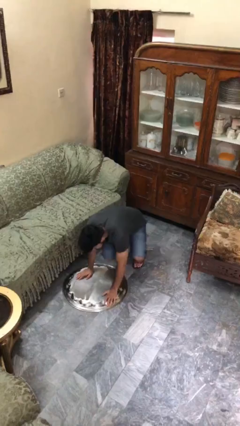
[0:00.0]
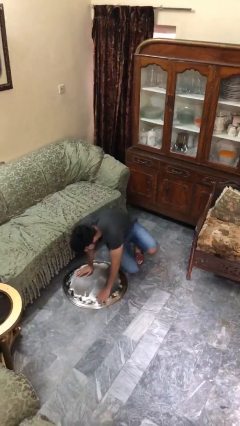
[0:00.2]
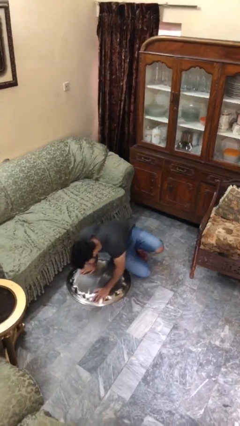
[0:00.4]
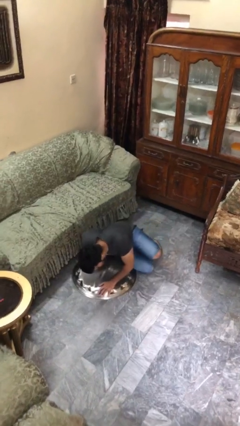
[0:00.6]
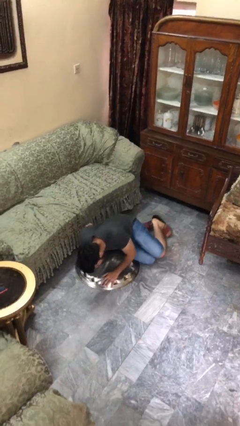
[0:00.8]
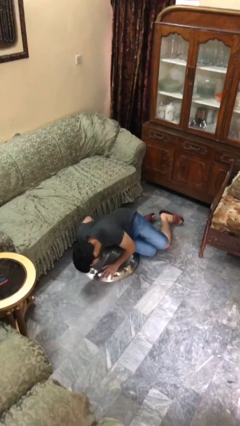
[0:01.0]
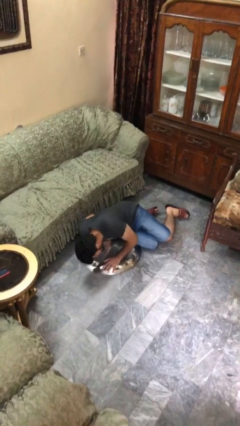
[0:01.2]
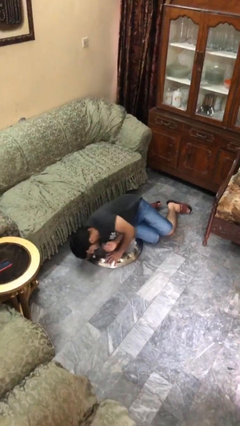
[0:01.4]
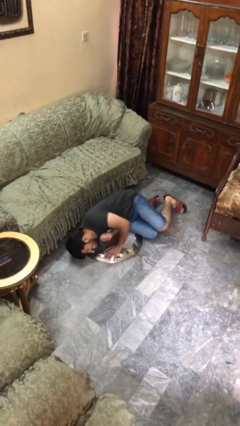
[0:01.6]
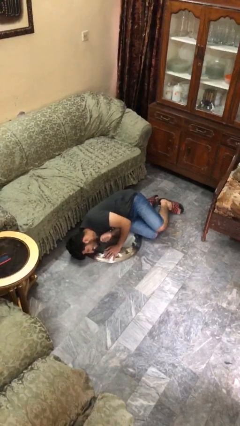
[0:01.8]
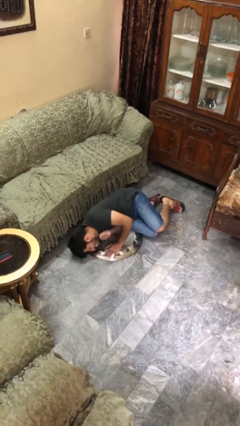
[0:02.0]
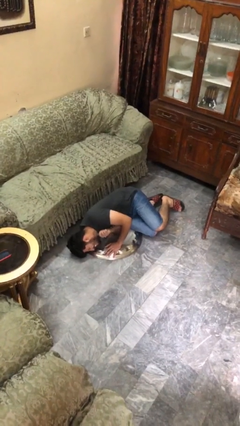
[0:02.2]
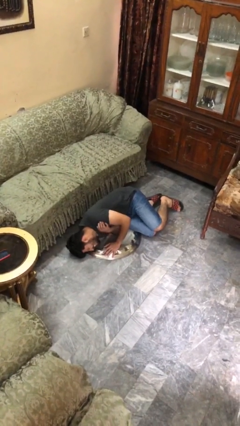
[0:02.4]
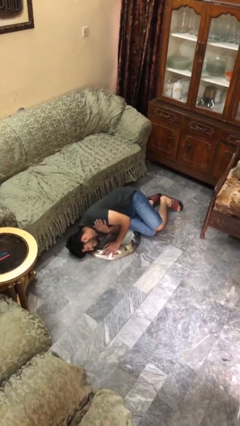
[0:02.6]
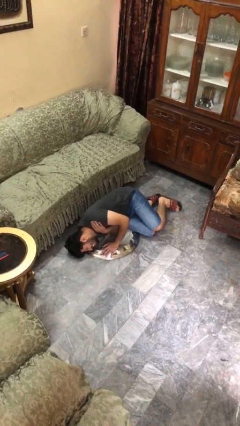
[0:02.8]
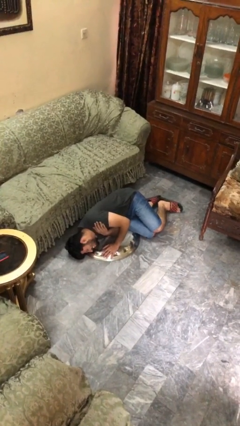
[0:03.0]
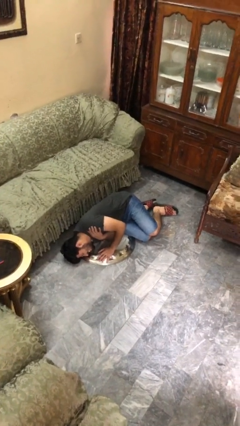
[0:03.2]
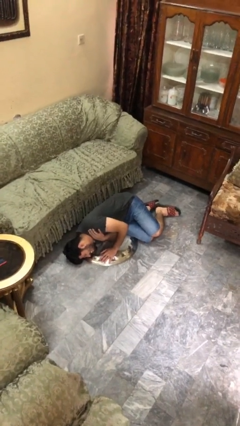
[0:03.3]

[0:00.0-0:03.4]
person lies down on floor

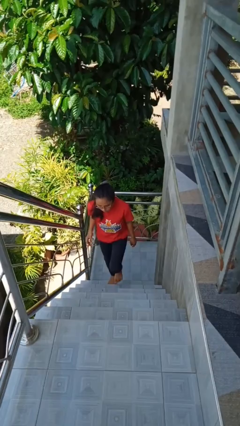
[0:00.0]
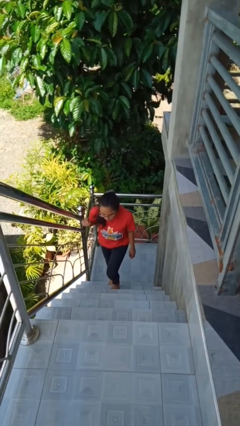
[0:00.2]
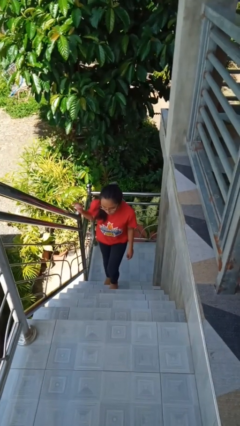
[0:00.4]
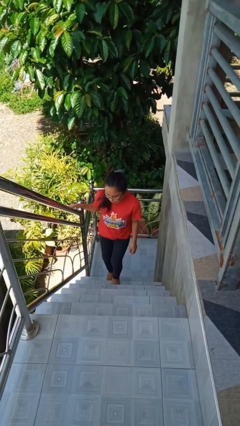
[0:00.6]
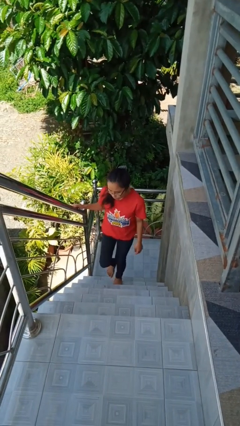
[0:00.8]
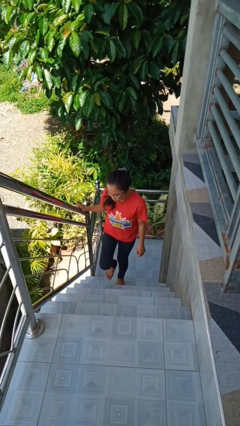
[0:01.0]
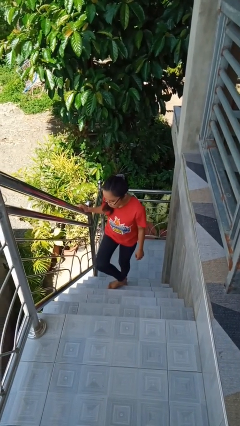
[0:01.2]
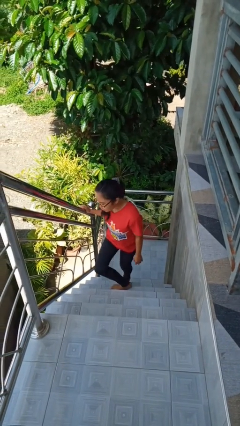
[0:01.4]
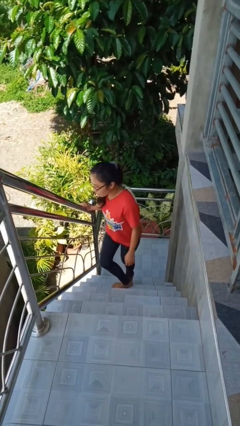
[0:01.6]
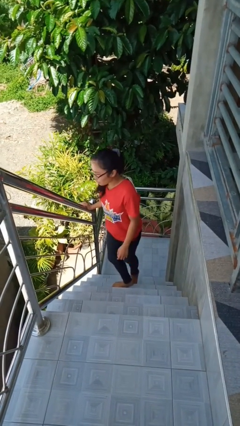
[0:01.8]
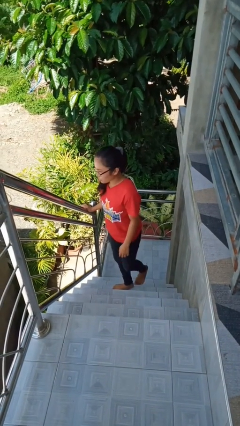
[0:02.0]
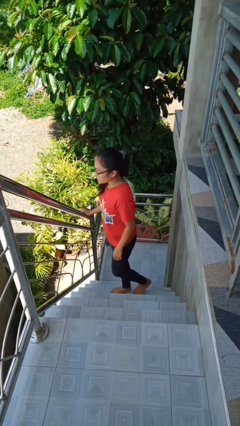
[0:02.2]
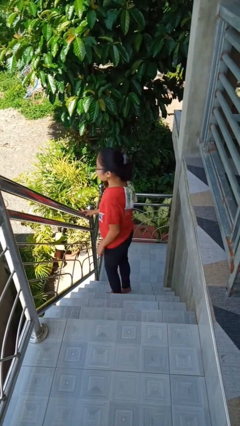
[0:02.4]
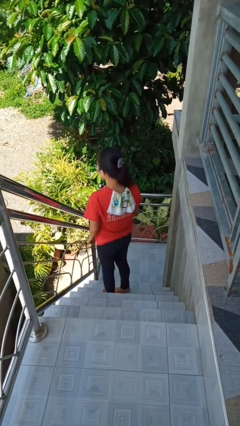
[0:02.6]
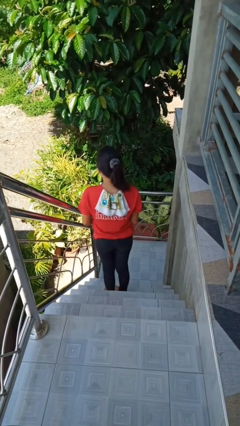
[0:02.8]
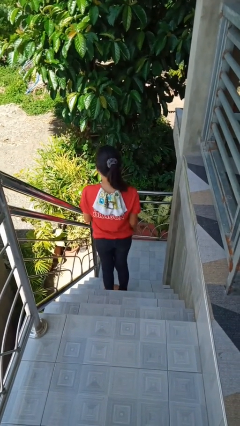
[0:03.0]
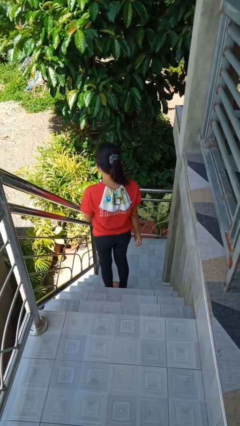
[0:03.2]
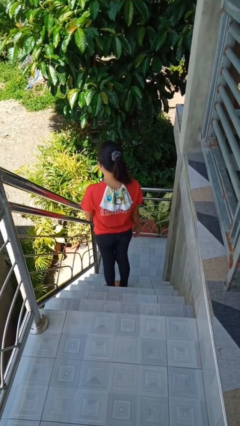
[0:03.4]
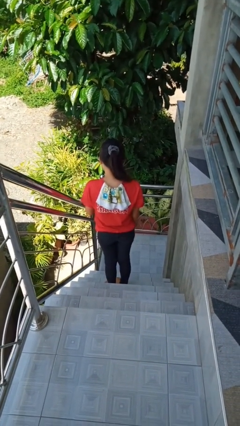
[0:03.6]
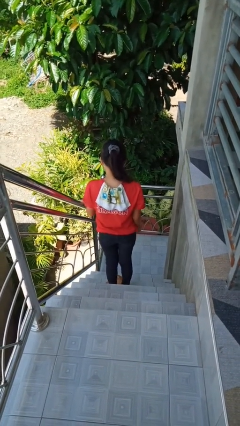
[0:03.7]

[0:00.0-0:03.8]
person climbs up stairs

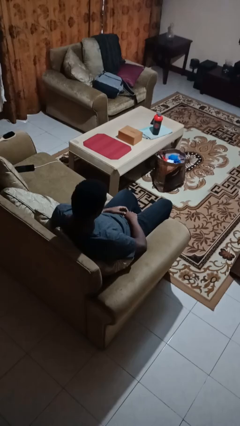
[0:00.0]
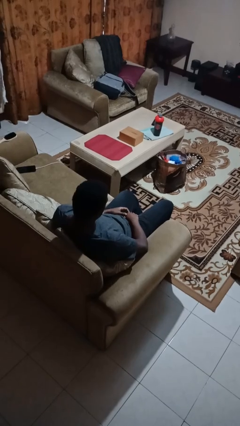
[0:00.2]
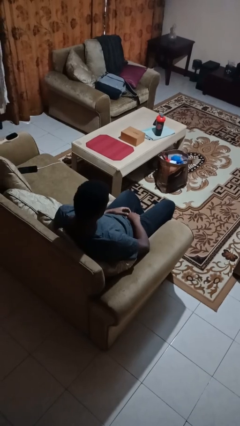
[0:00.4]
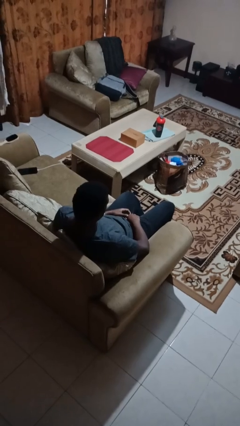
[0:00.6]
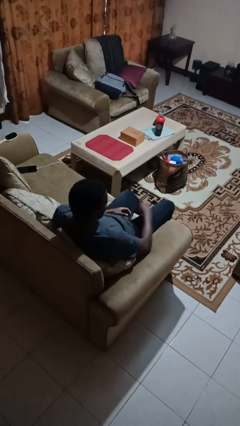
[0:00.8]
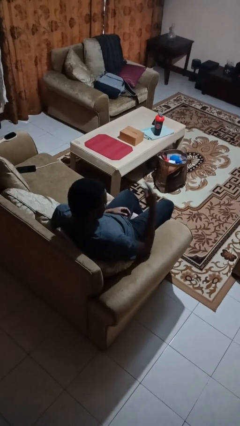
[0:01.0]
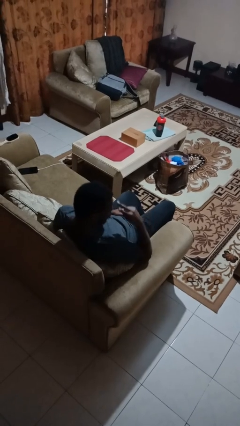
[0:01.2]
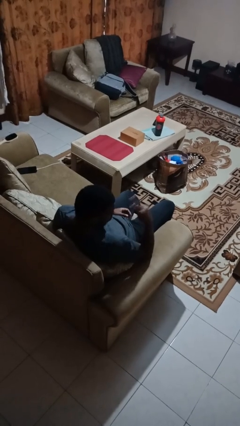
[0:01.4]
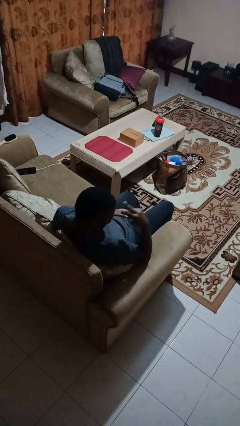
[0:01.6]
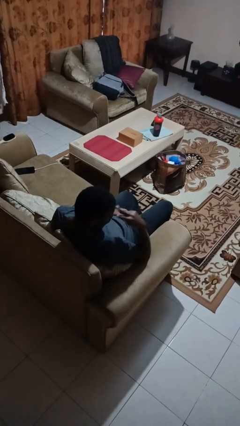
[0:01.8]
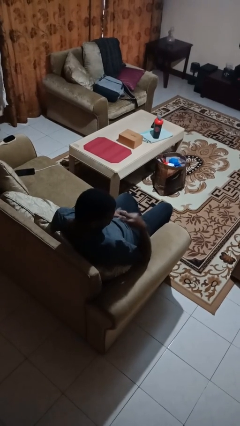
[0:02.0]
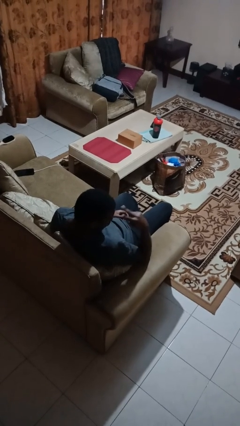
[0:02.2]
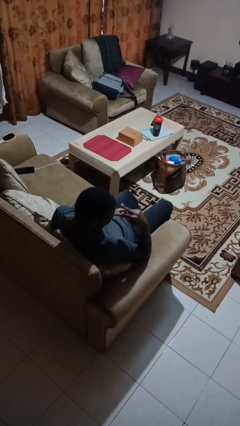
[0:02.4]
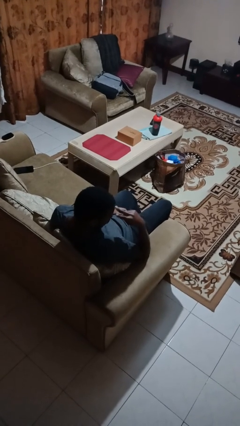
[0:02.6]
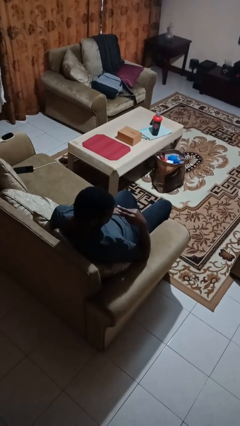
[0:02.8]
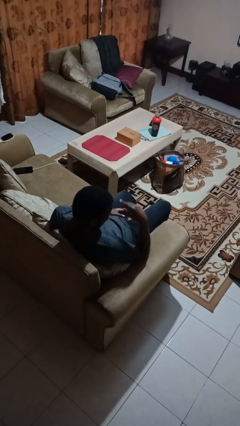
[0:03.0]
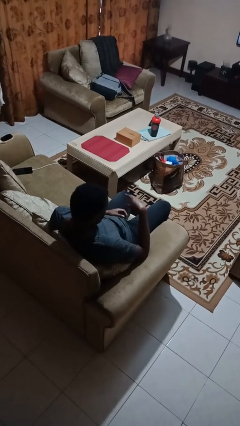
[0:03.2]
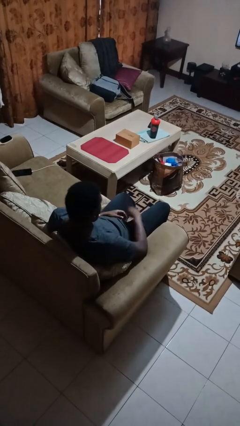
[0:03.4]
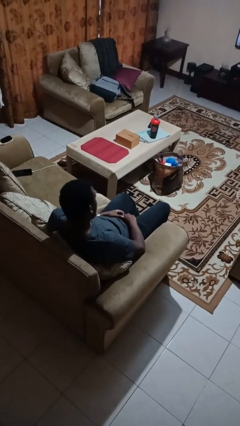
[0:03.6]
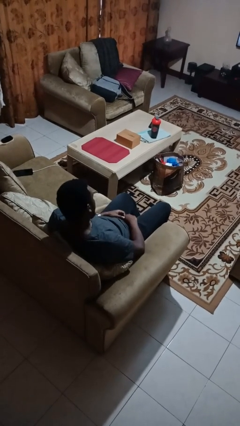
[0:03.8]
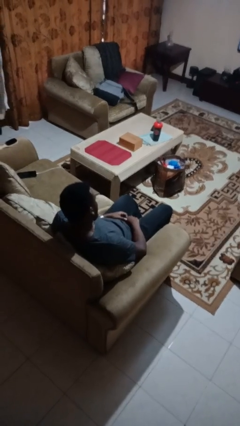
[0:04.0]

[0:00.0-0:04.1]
person gestures watch closely

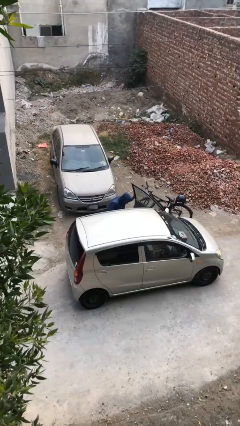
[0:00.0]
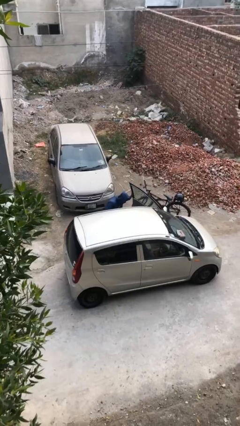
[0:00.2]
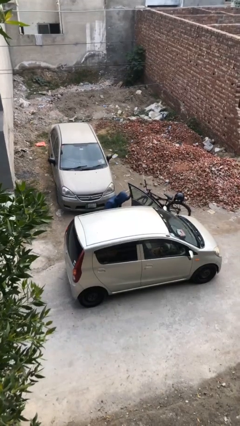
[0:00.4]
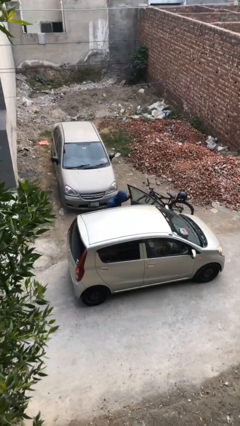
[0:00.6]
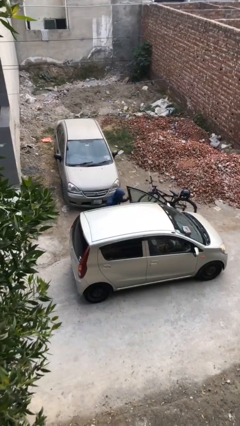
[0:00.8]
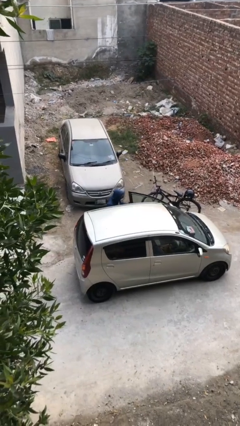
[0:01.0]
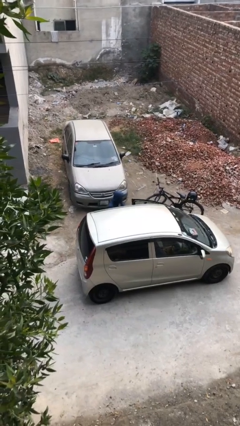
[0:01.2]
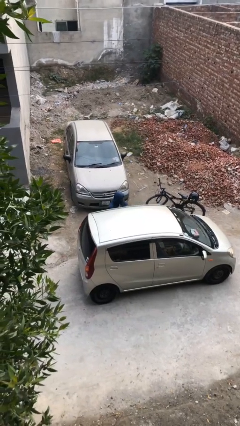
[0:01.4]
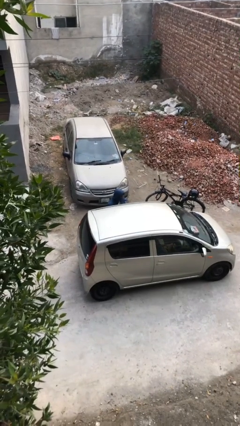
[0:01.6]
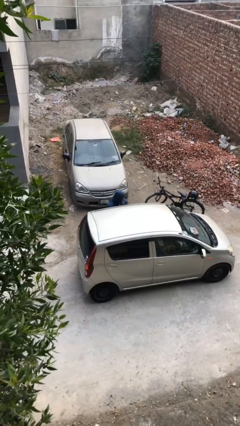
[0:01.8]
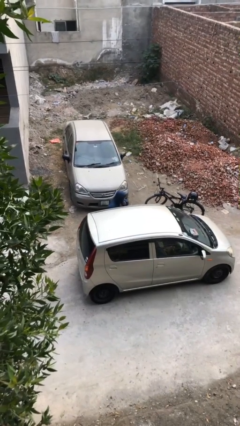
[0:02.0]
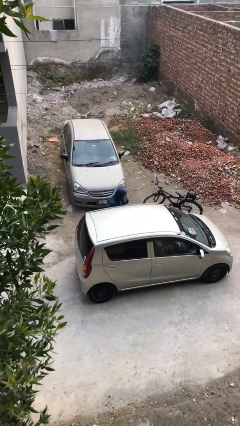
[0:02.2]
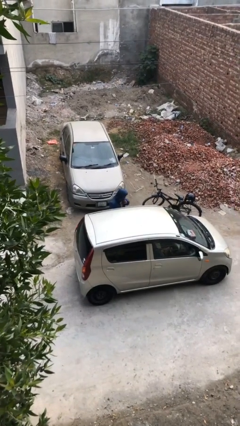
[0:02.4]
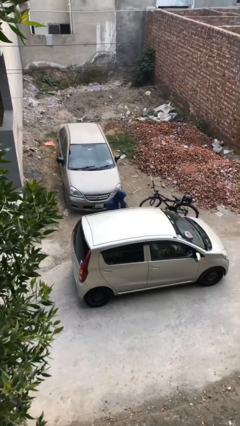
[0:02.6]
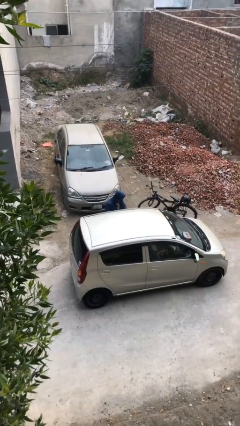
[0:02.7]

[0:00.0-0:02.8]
person closes car door

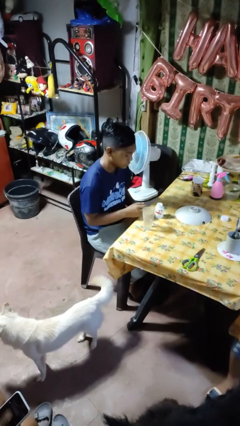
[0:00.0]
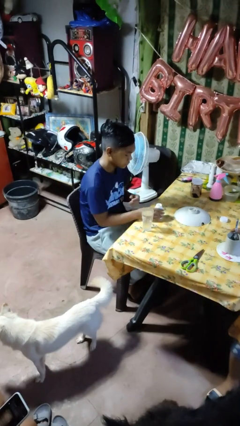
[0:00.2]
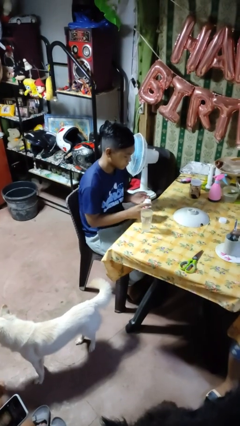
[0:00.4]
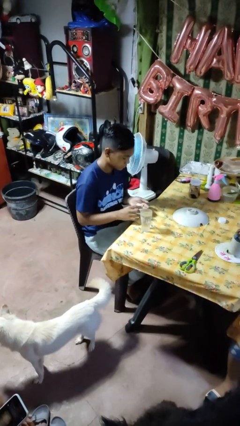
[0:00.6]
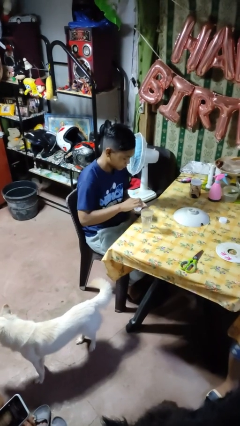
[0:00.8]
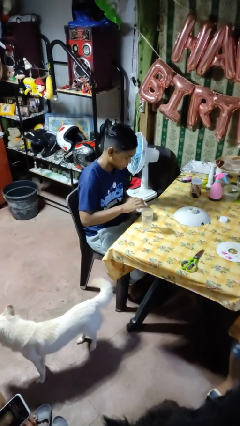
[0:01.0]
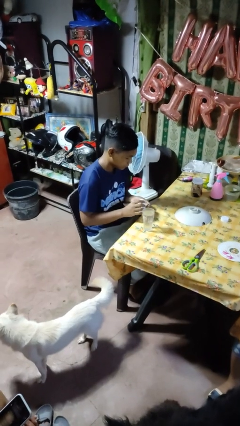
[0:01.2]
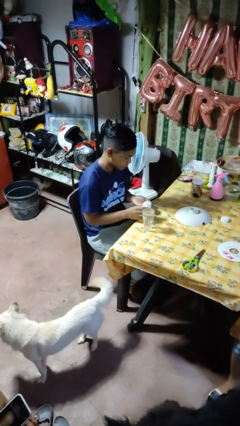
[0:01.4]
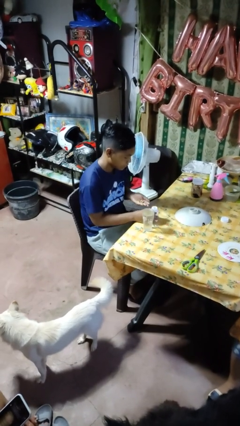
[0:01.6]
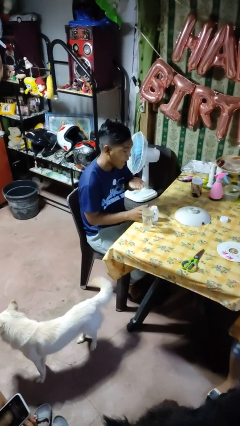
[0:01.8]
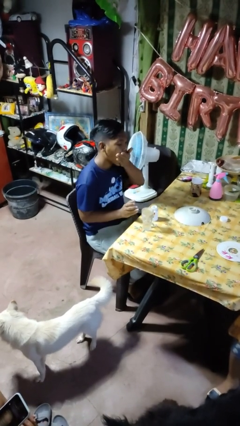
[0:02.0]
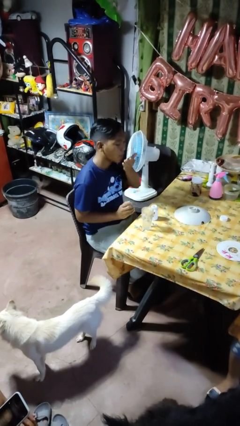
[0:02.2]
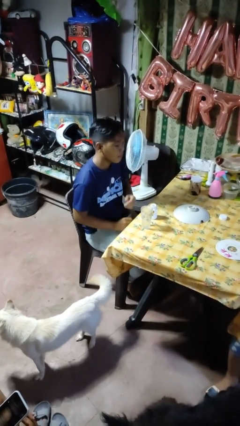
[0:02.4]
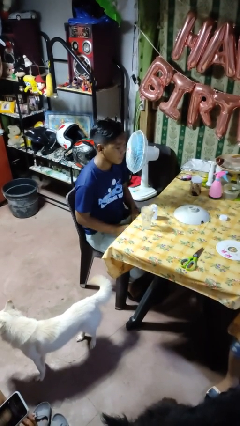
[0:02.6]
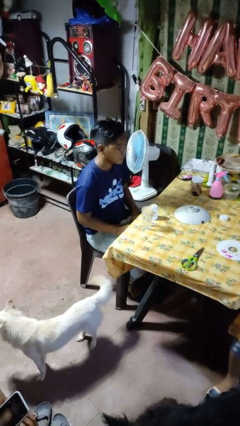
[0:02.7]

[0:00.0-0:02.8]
person takes medicine pills

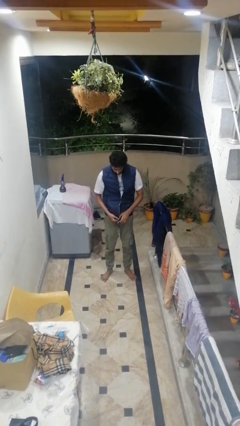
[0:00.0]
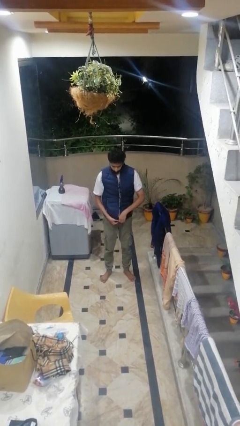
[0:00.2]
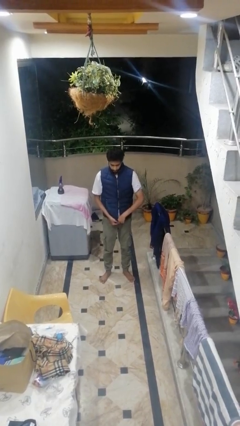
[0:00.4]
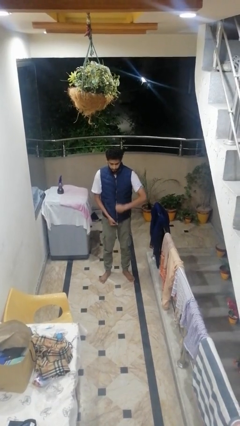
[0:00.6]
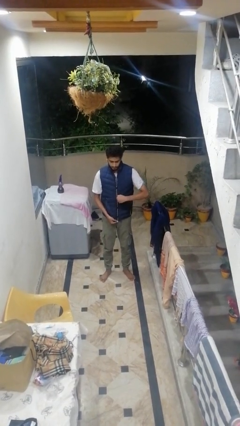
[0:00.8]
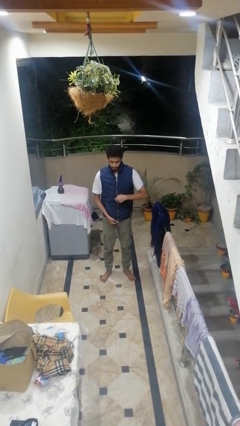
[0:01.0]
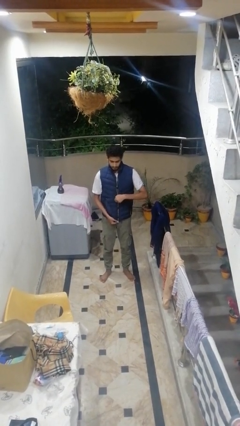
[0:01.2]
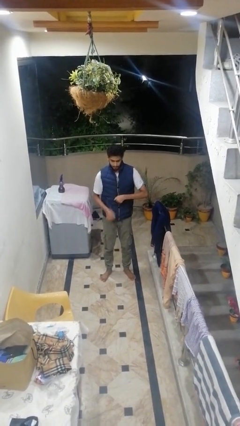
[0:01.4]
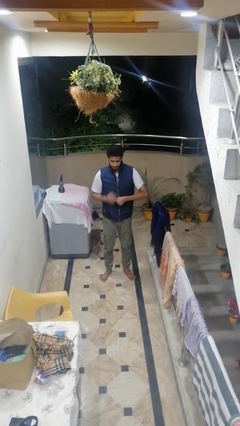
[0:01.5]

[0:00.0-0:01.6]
person zips up jacket
